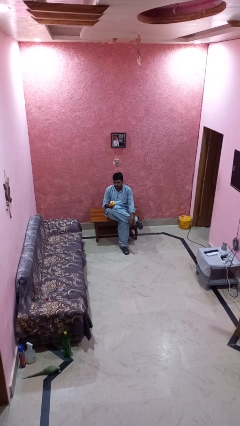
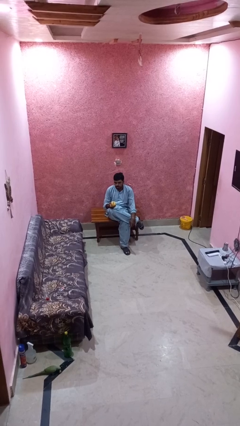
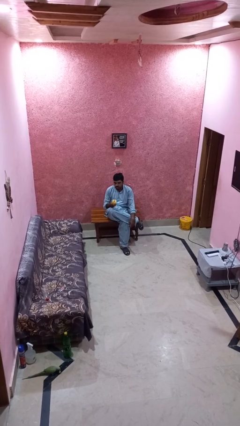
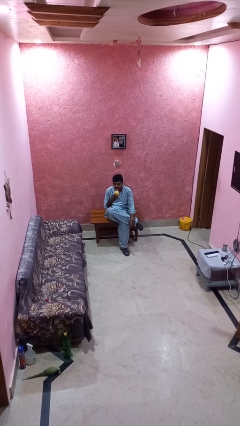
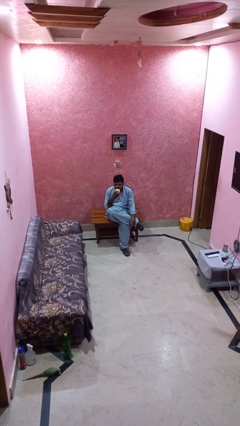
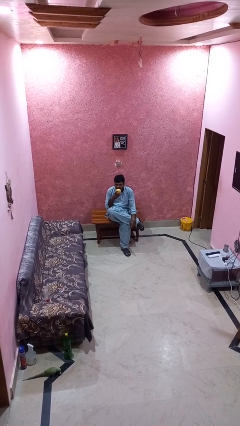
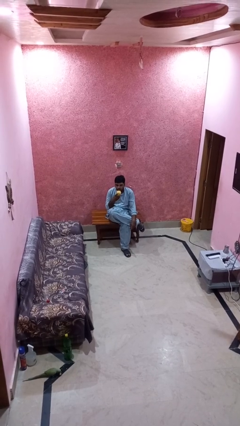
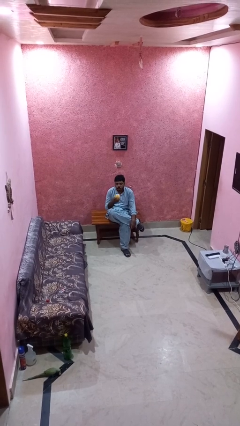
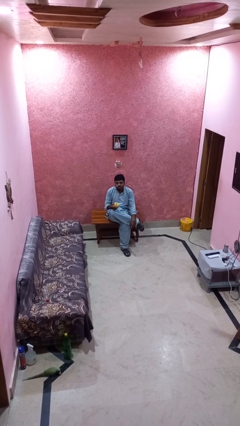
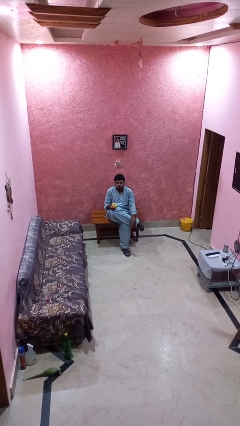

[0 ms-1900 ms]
person eats apple

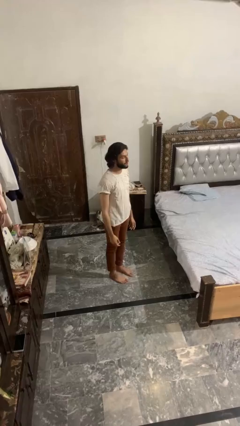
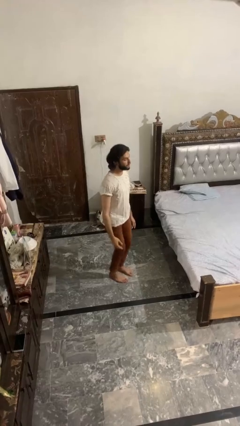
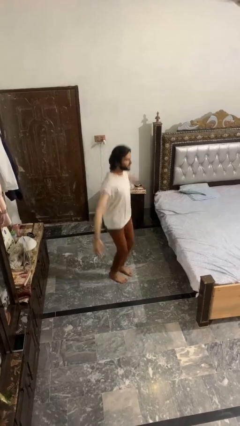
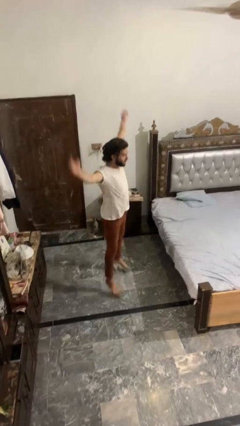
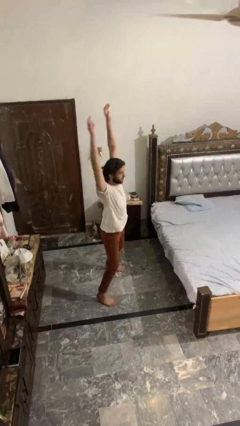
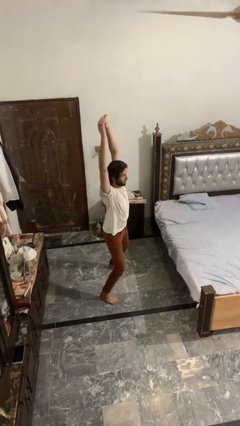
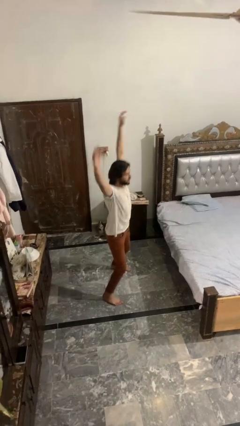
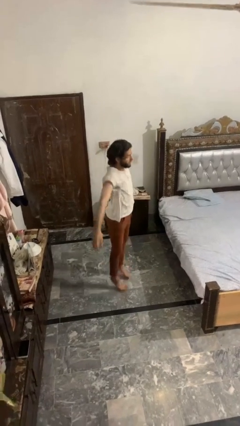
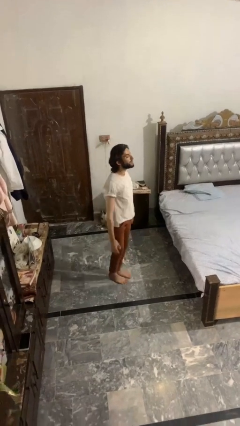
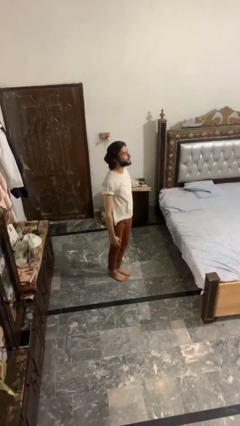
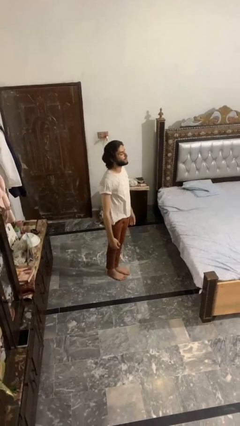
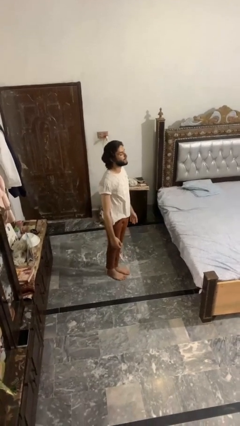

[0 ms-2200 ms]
person exercises with jumping jacks

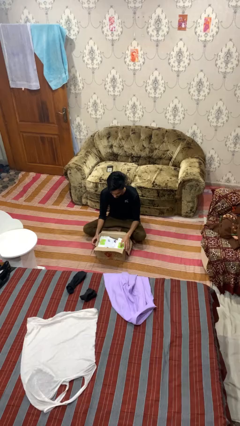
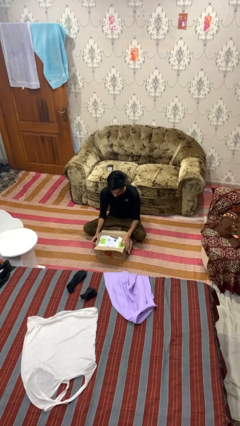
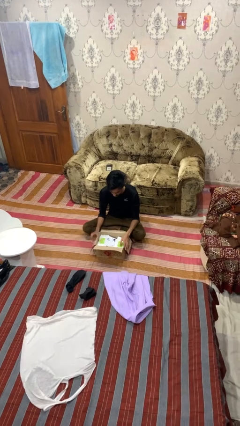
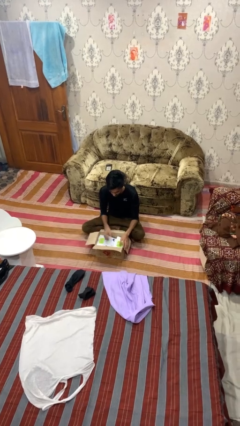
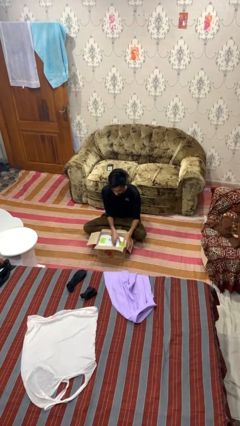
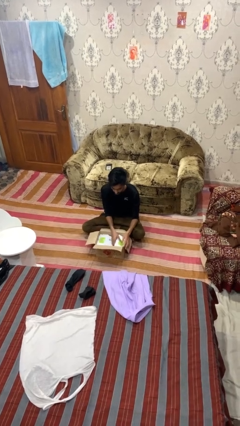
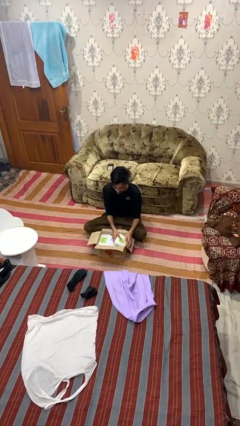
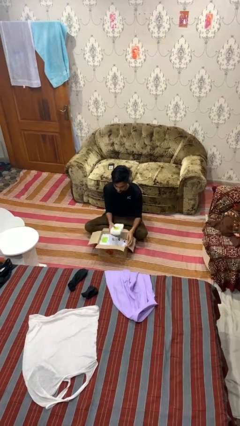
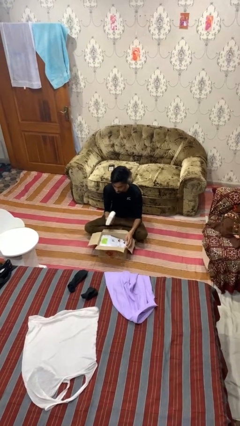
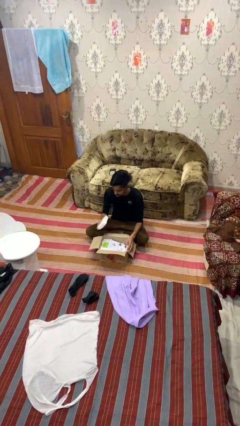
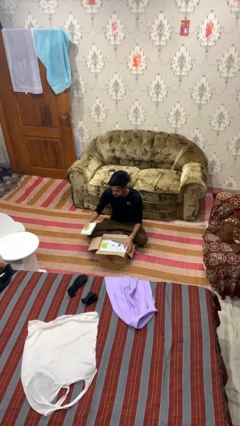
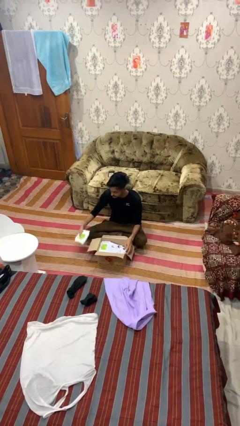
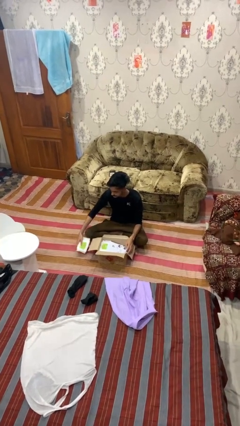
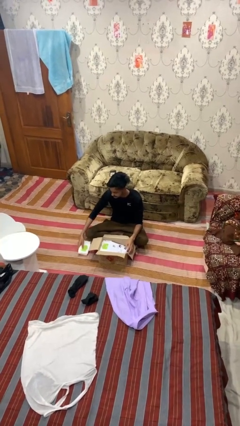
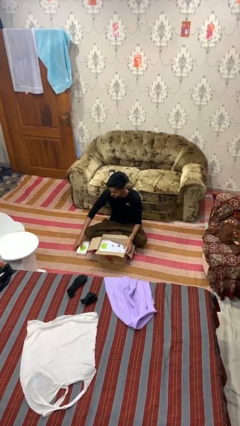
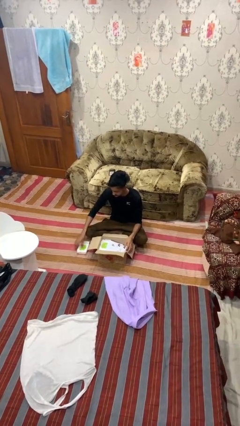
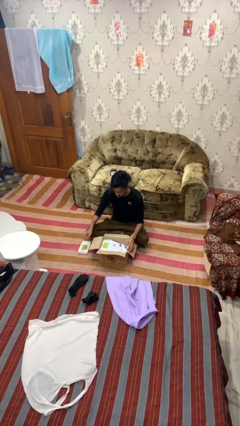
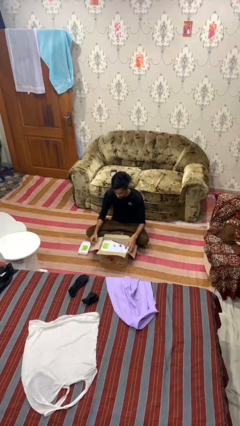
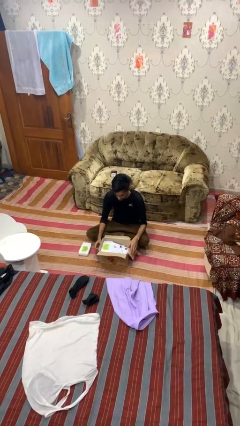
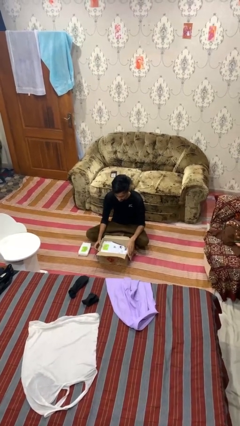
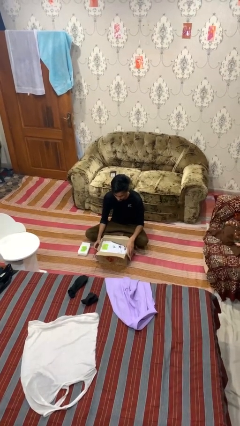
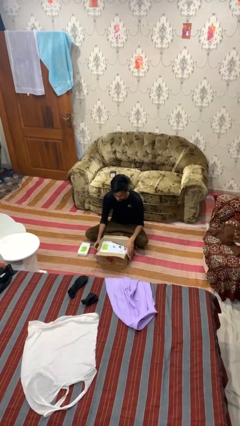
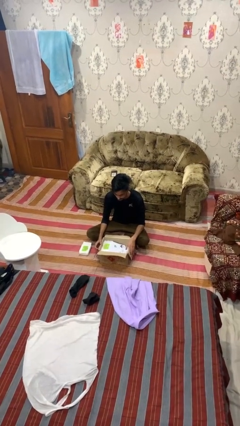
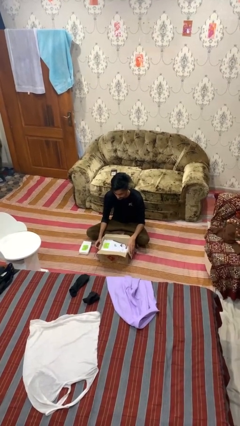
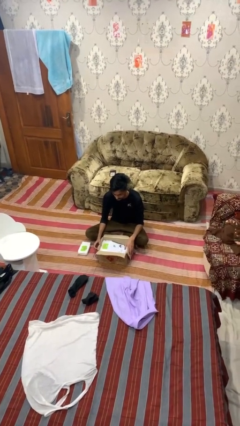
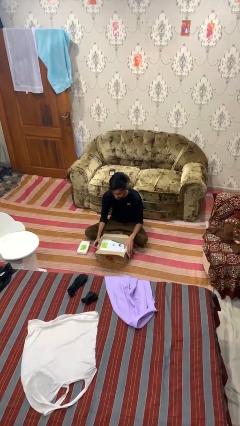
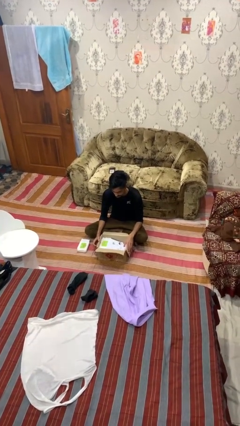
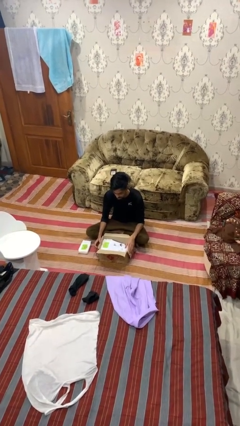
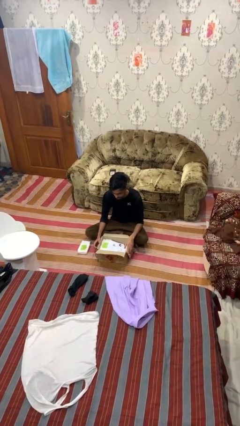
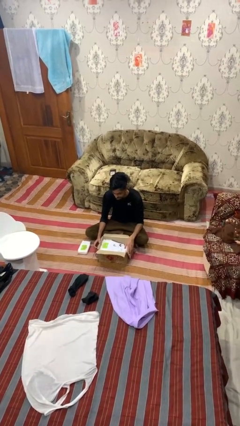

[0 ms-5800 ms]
person takes object from box

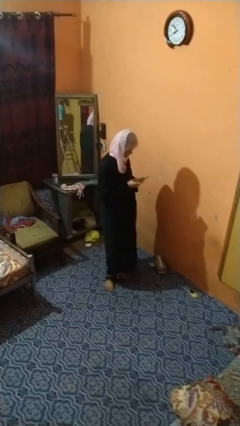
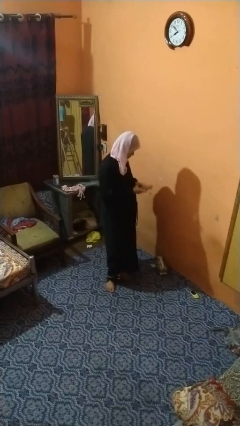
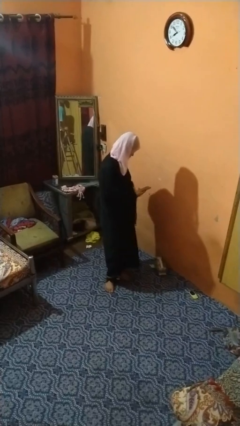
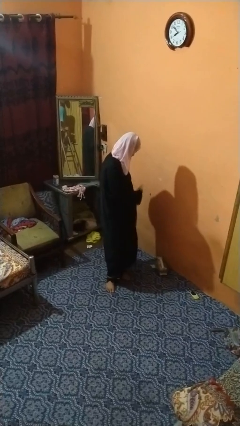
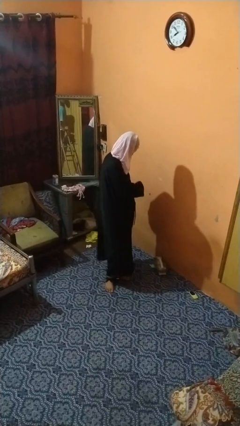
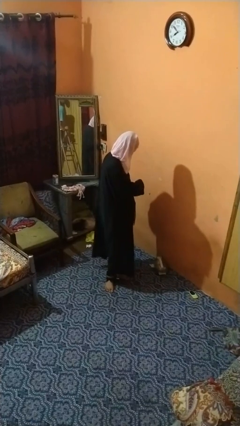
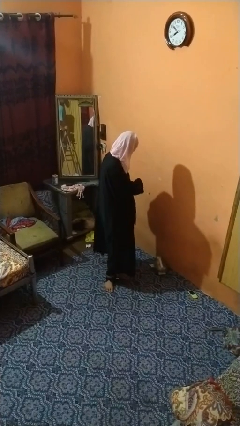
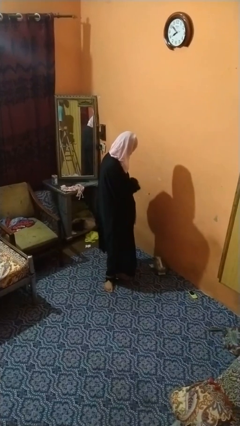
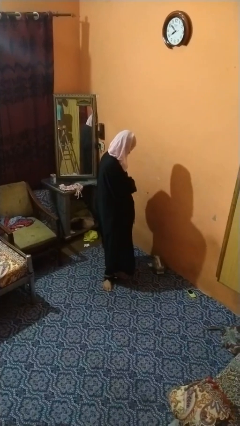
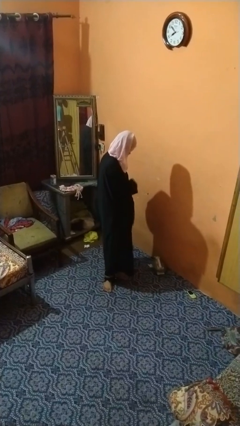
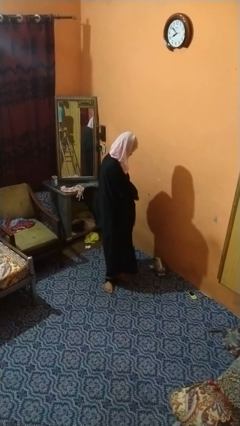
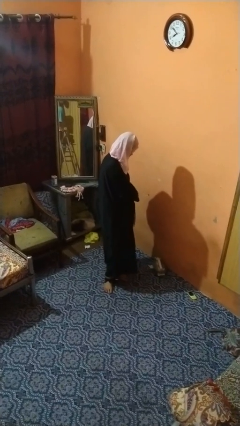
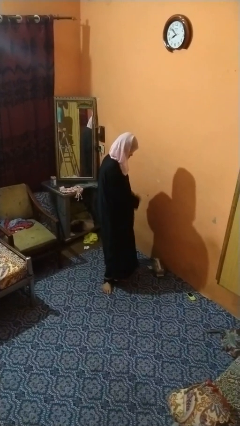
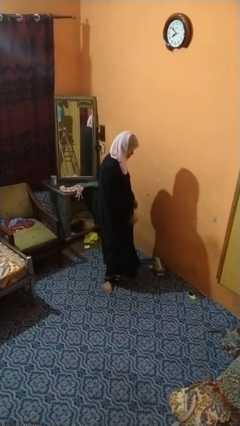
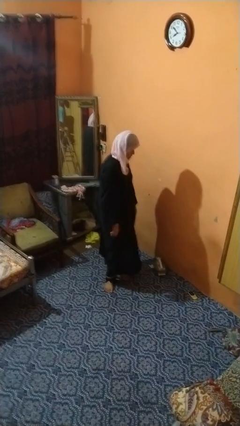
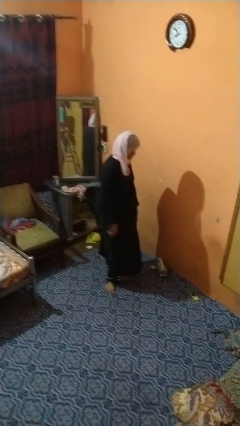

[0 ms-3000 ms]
person puts phone into pocket

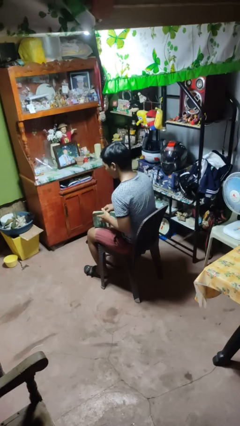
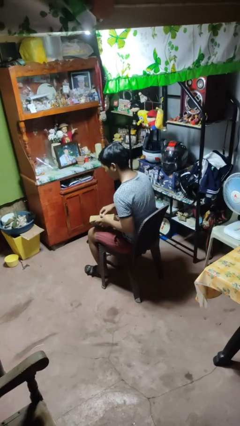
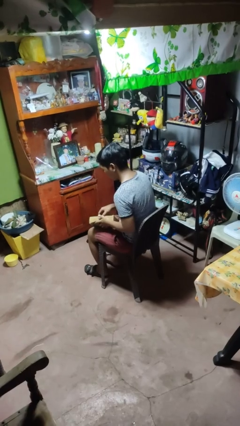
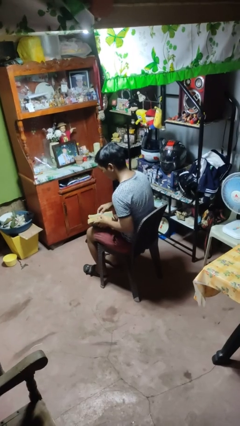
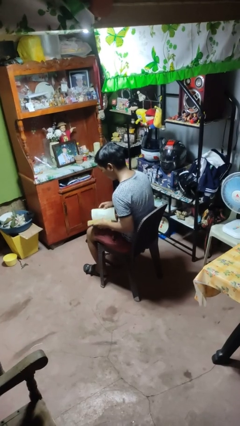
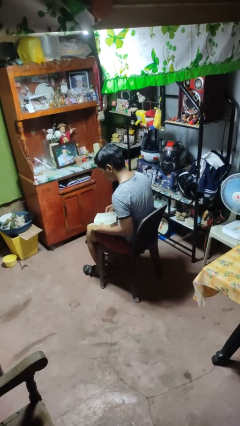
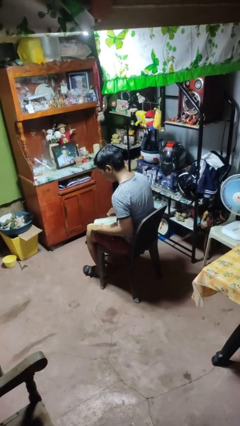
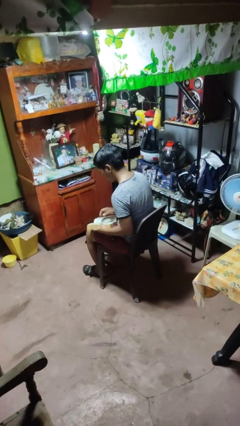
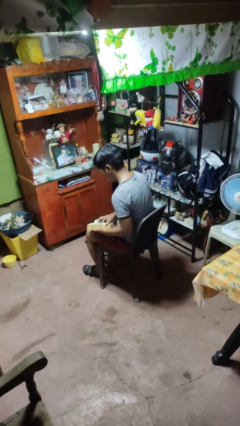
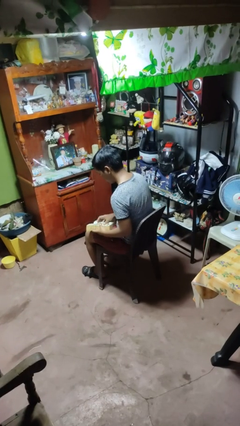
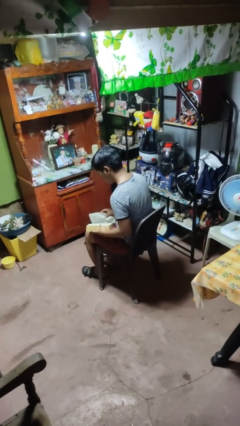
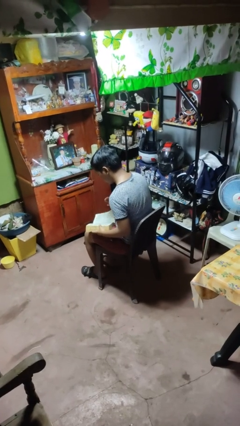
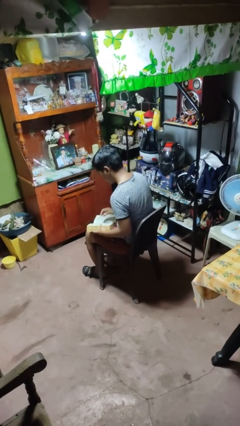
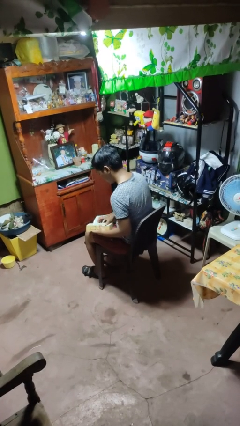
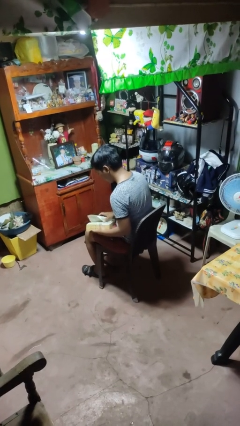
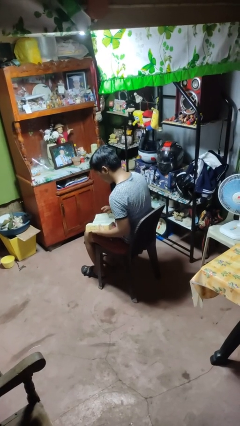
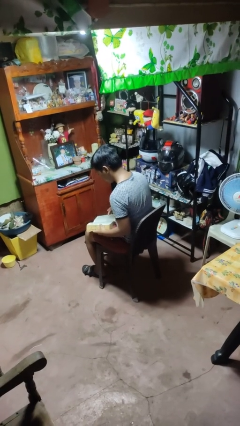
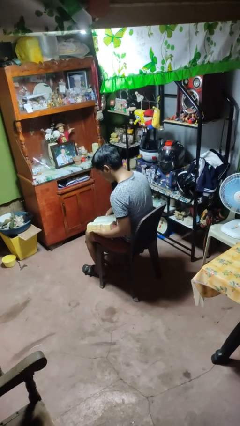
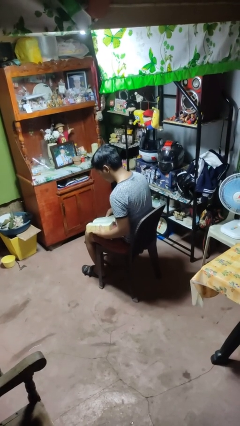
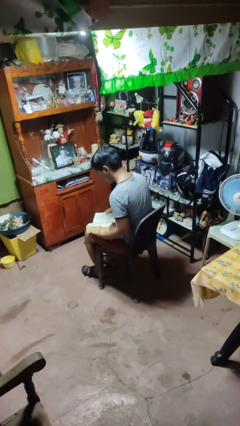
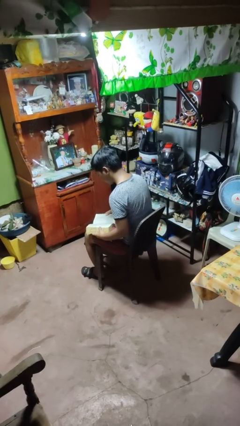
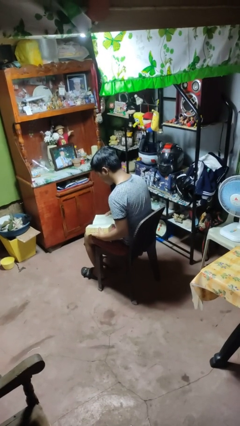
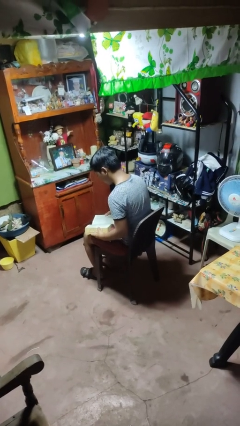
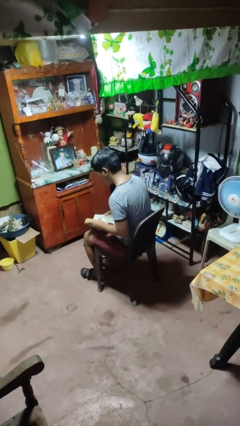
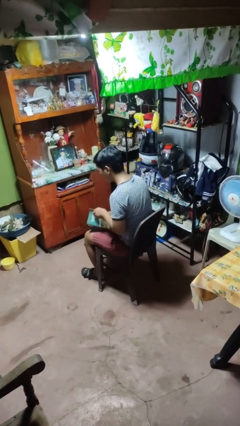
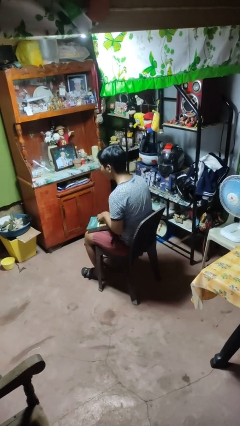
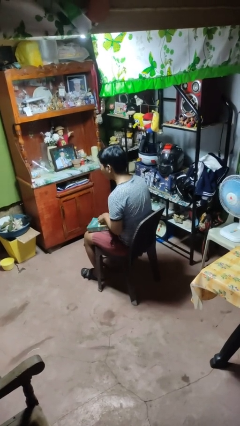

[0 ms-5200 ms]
person reads book
